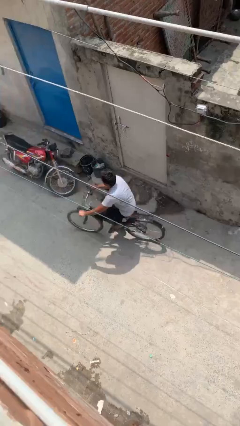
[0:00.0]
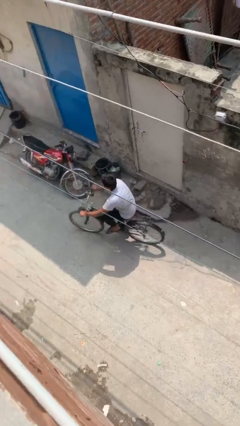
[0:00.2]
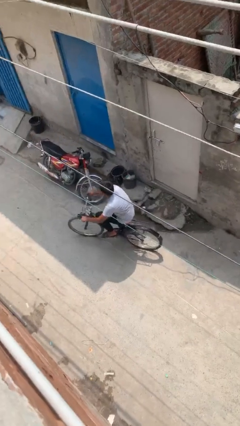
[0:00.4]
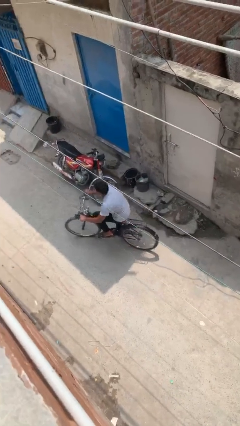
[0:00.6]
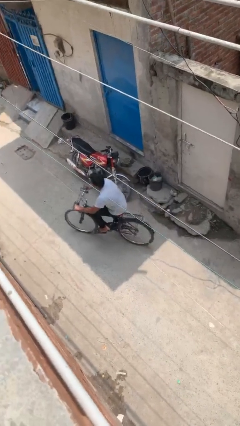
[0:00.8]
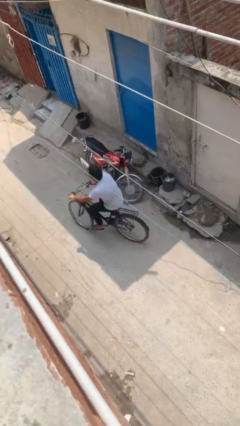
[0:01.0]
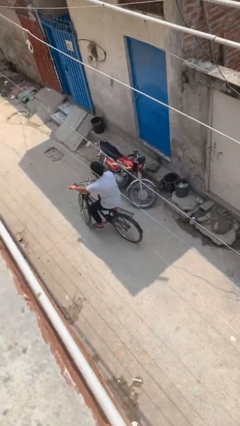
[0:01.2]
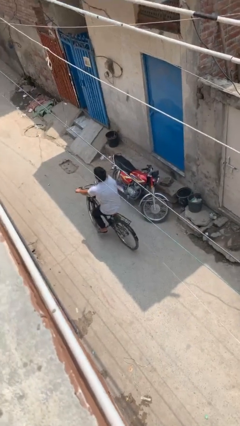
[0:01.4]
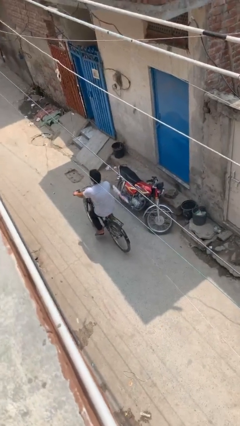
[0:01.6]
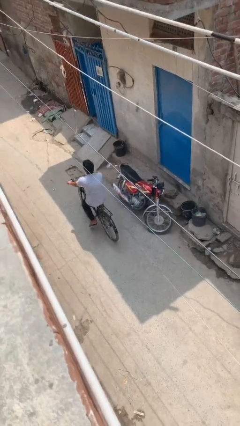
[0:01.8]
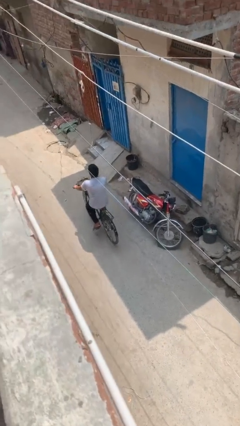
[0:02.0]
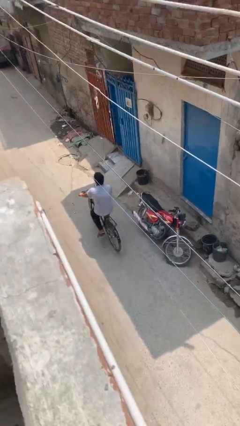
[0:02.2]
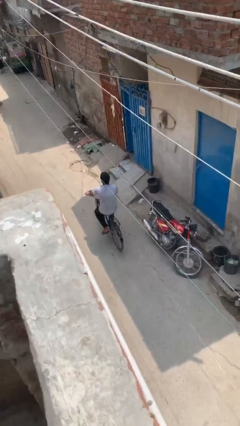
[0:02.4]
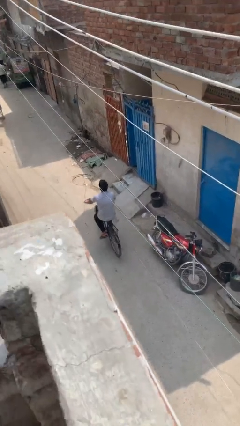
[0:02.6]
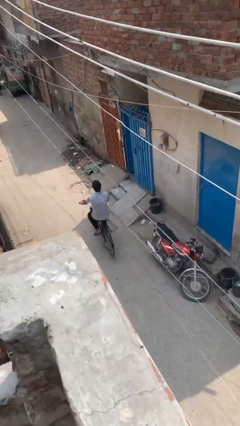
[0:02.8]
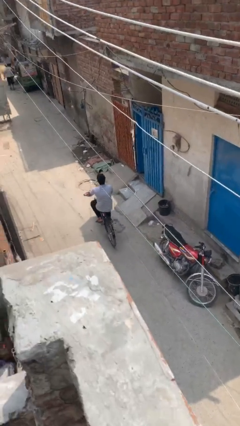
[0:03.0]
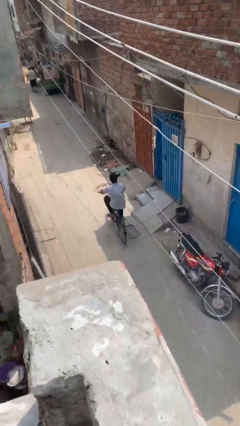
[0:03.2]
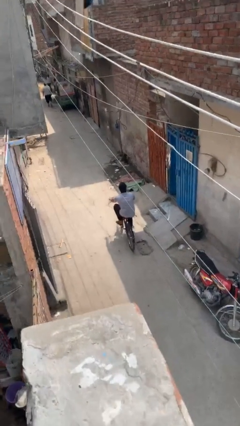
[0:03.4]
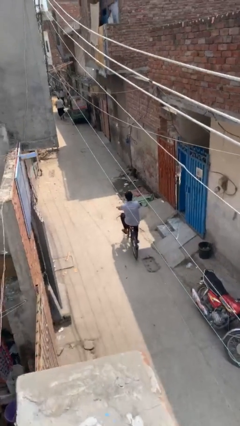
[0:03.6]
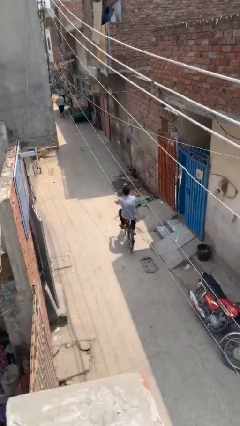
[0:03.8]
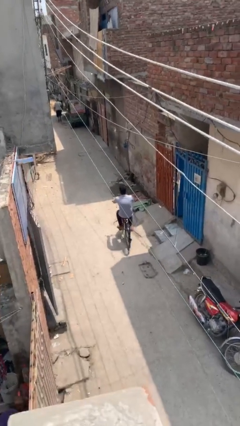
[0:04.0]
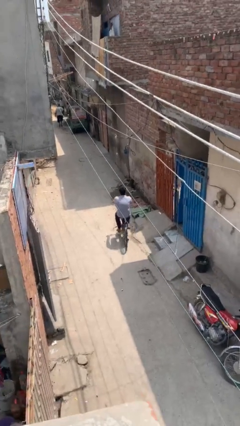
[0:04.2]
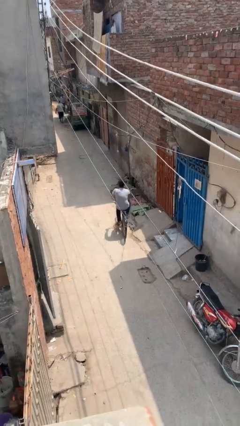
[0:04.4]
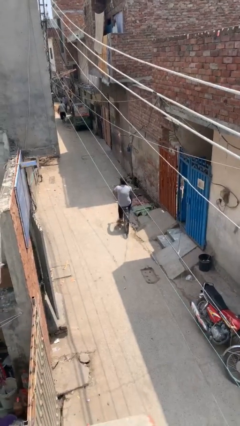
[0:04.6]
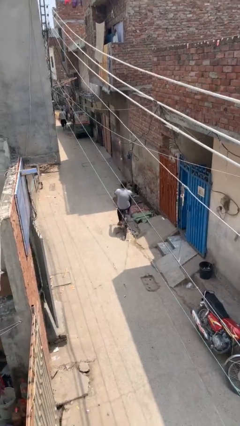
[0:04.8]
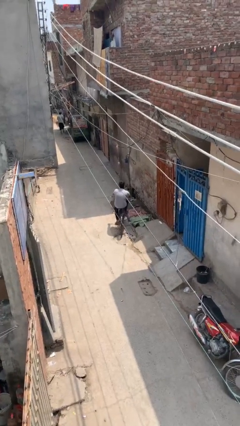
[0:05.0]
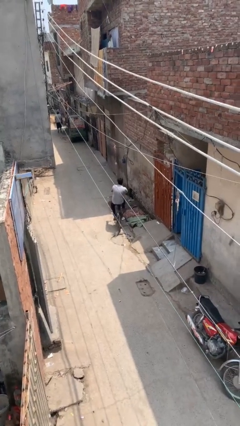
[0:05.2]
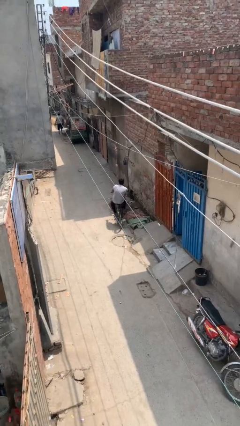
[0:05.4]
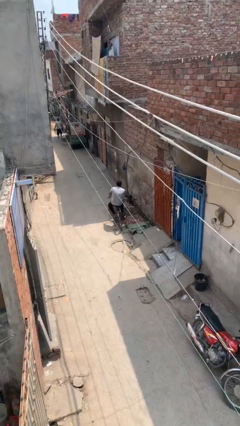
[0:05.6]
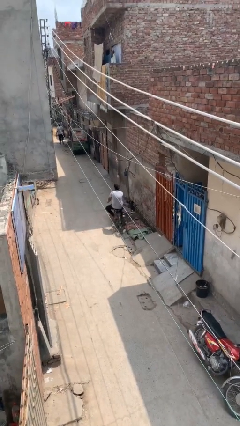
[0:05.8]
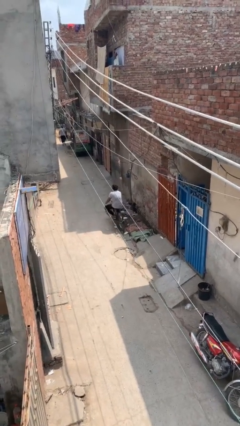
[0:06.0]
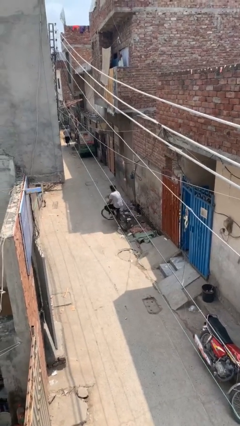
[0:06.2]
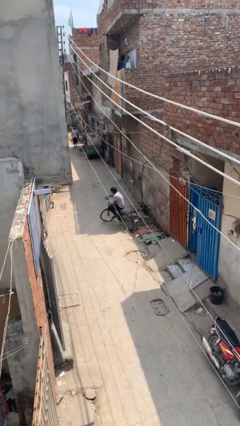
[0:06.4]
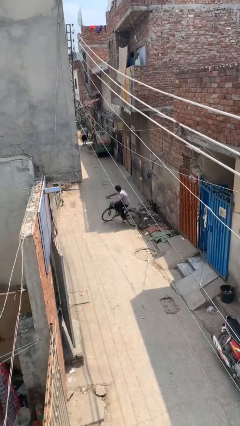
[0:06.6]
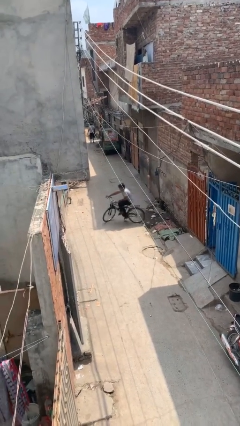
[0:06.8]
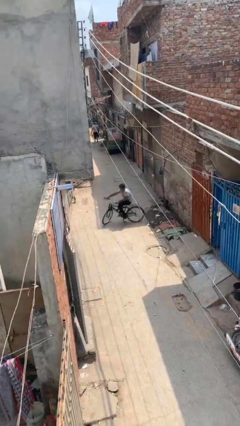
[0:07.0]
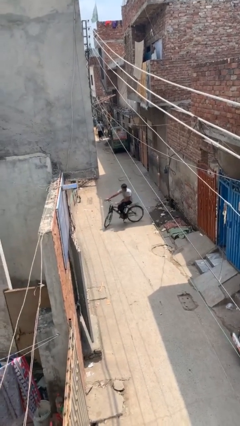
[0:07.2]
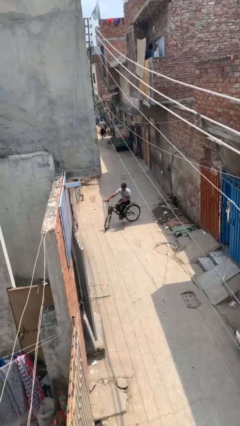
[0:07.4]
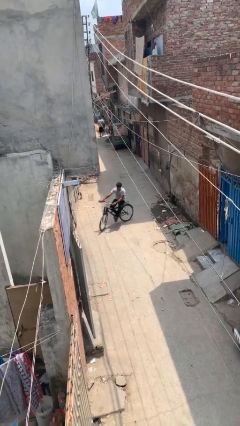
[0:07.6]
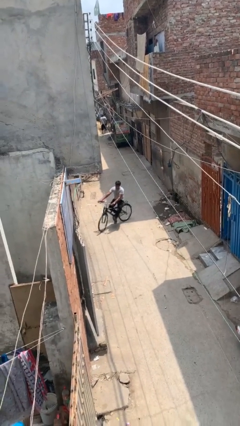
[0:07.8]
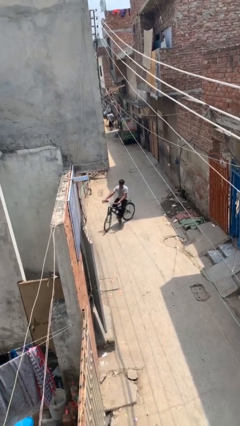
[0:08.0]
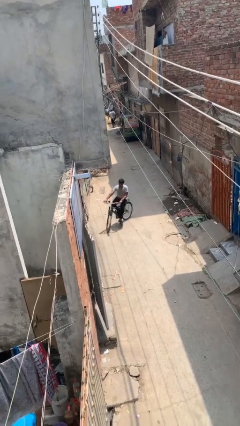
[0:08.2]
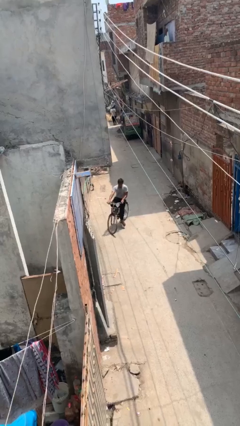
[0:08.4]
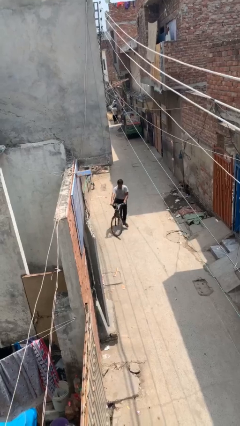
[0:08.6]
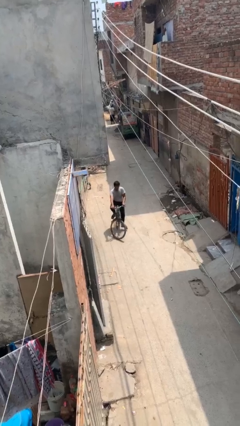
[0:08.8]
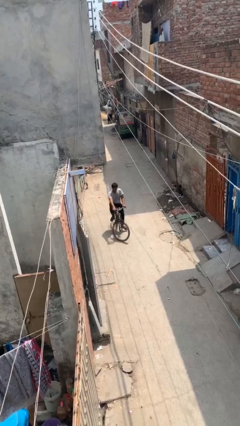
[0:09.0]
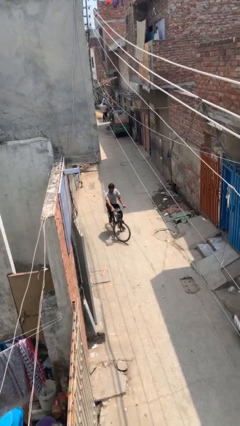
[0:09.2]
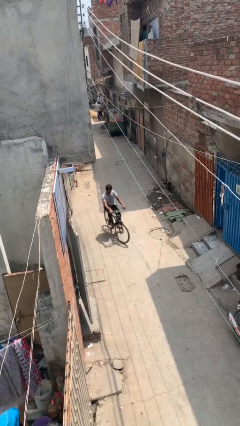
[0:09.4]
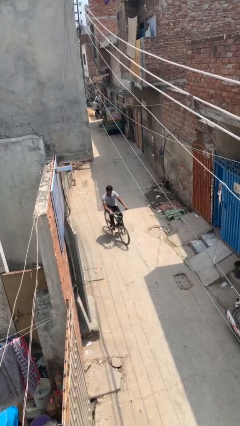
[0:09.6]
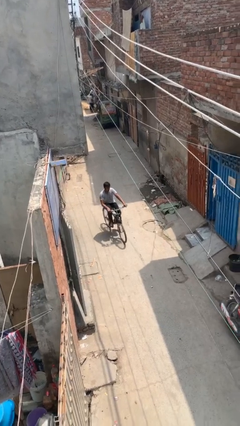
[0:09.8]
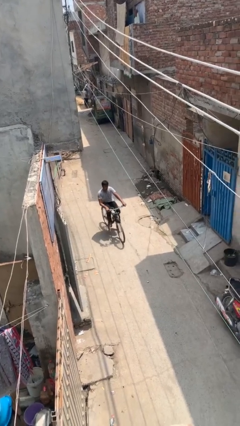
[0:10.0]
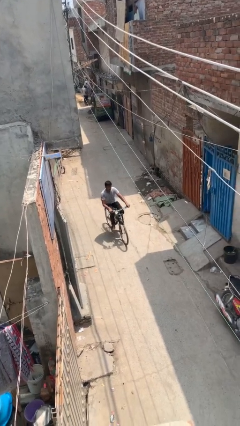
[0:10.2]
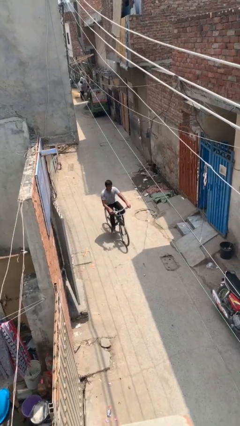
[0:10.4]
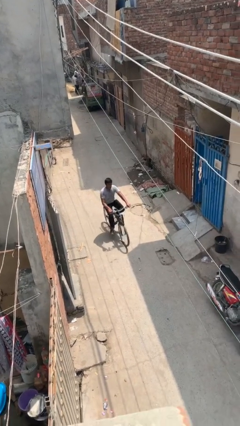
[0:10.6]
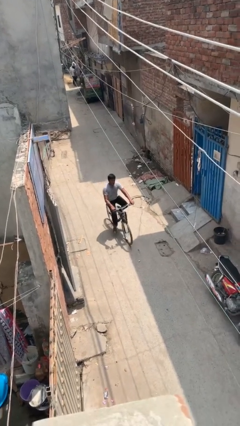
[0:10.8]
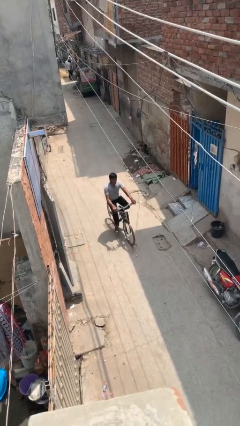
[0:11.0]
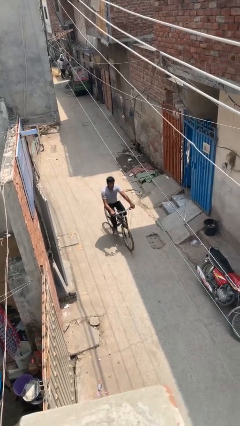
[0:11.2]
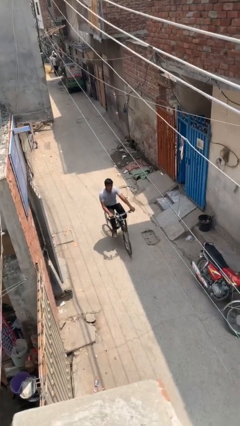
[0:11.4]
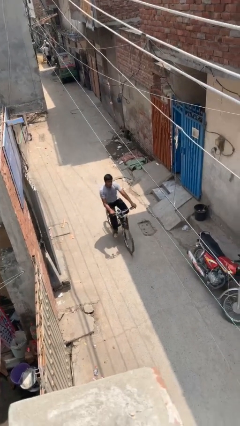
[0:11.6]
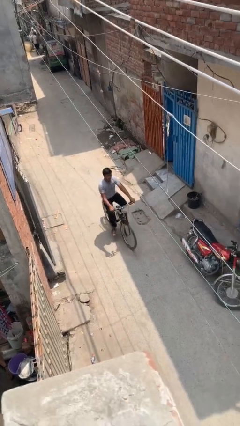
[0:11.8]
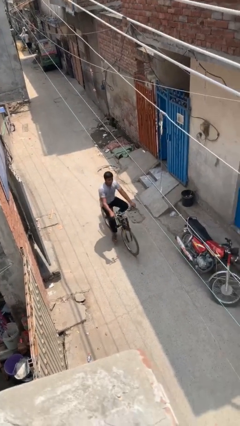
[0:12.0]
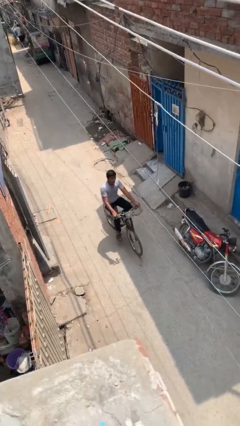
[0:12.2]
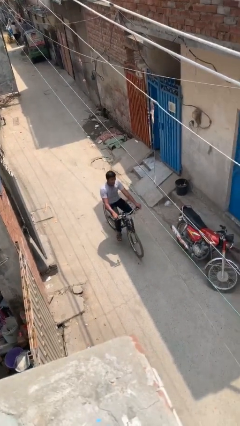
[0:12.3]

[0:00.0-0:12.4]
person rides bicycle

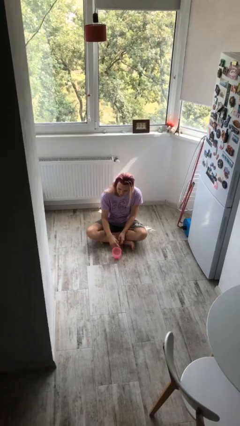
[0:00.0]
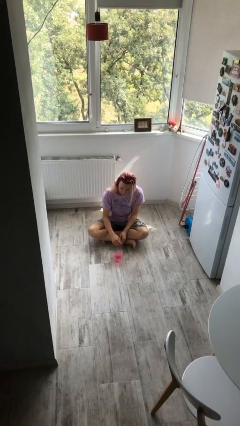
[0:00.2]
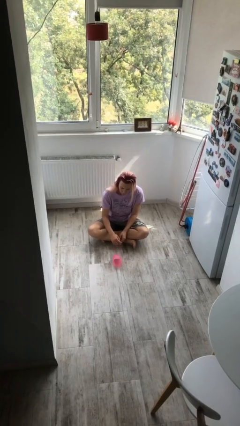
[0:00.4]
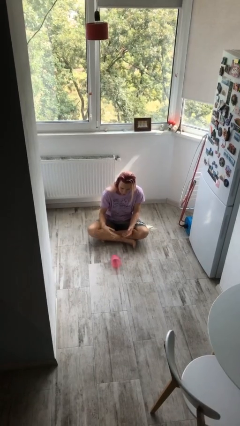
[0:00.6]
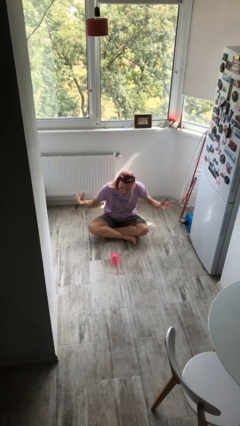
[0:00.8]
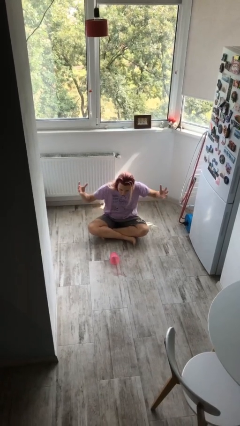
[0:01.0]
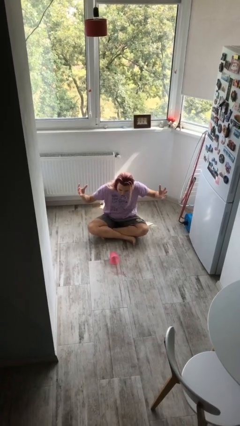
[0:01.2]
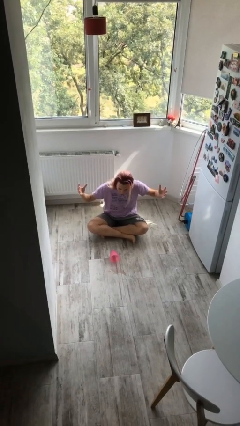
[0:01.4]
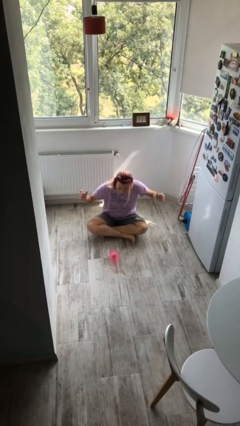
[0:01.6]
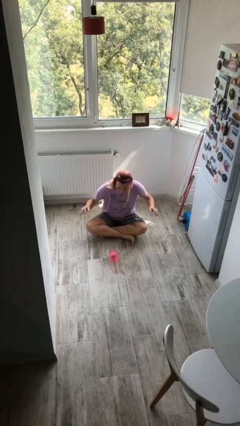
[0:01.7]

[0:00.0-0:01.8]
person spills on floor

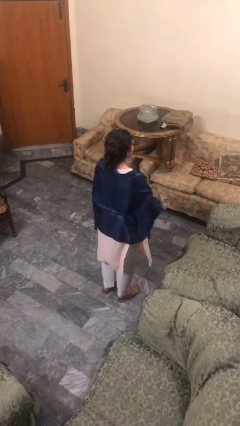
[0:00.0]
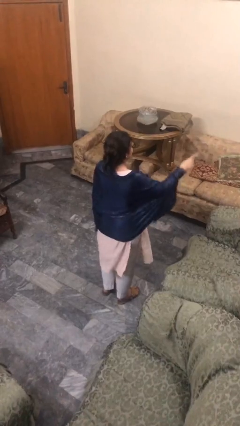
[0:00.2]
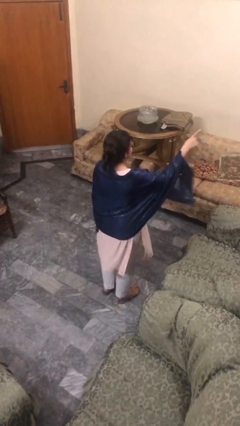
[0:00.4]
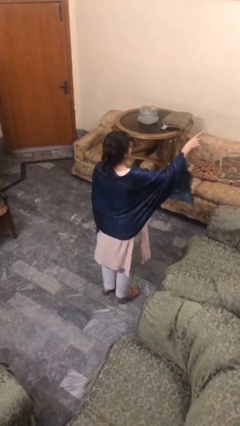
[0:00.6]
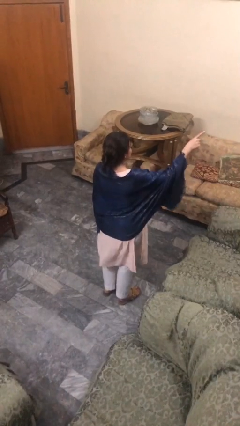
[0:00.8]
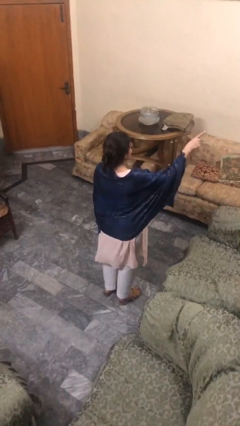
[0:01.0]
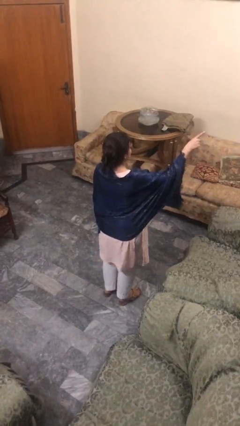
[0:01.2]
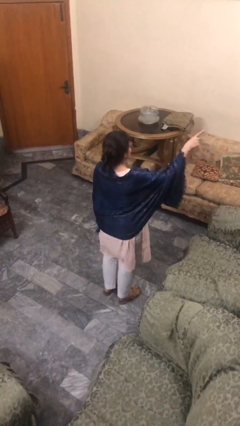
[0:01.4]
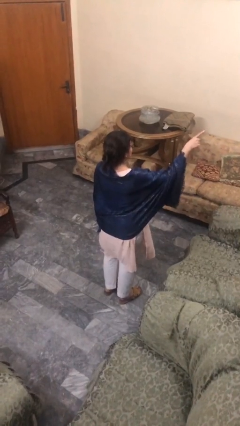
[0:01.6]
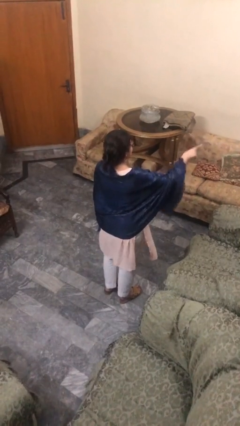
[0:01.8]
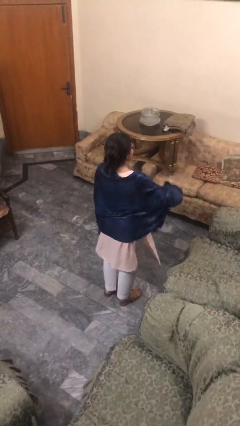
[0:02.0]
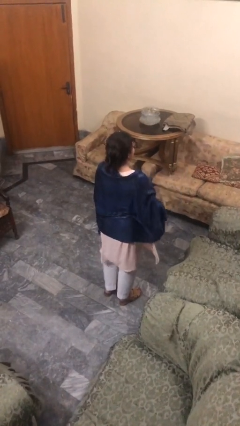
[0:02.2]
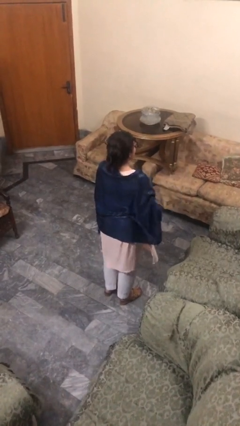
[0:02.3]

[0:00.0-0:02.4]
person points at person

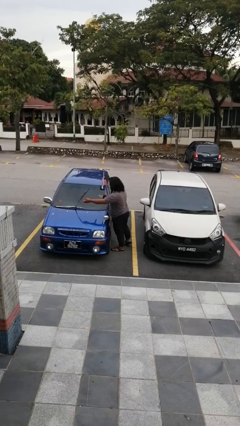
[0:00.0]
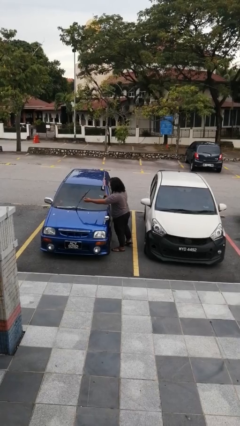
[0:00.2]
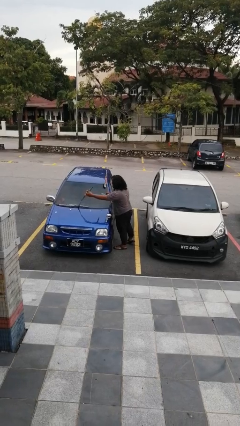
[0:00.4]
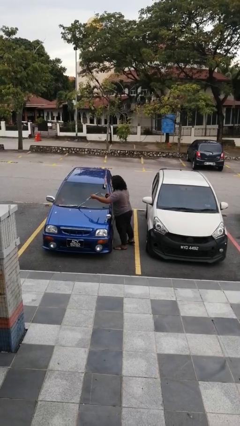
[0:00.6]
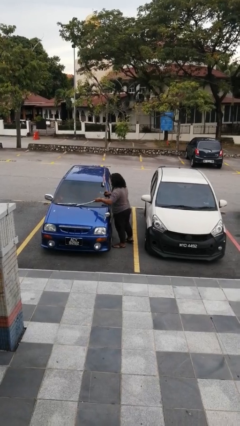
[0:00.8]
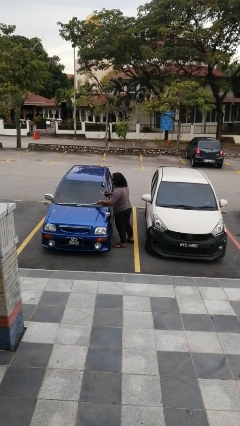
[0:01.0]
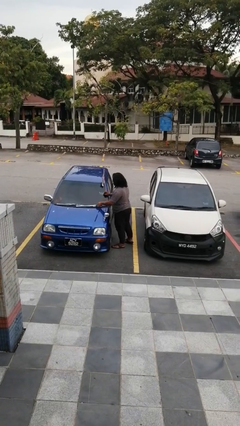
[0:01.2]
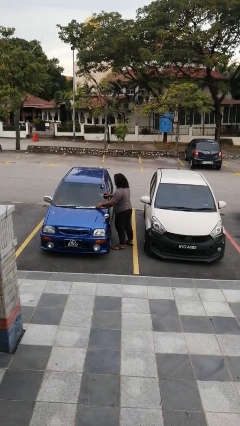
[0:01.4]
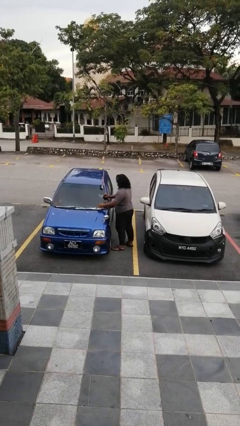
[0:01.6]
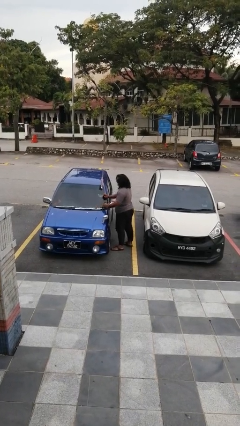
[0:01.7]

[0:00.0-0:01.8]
person flips down car wipers
